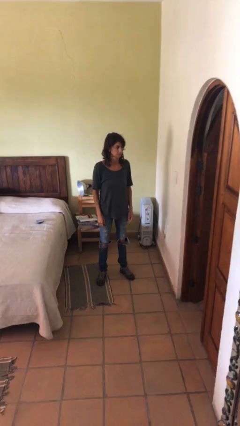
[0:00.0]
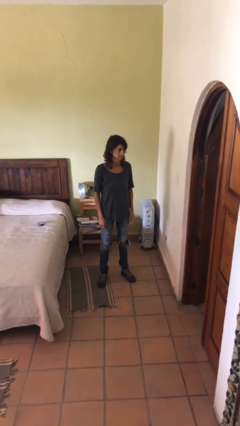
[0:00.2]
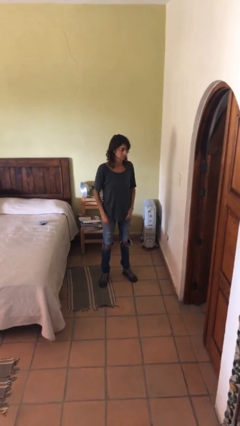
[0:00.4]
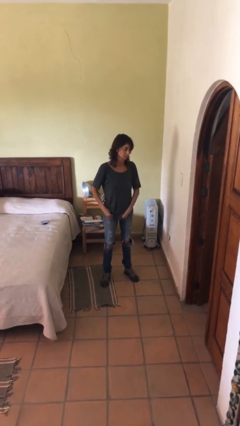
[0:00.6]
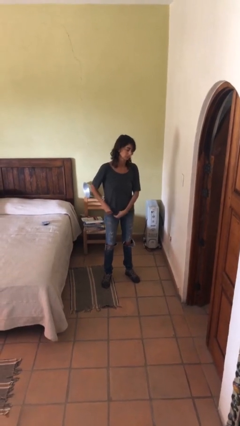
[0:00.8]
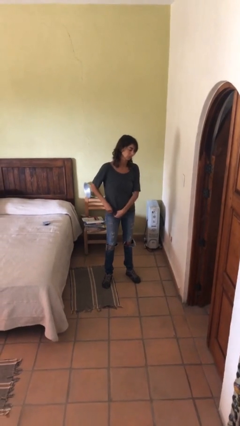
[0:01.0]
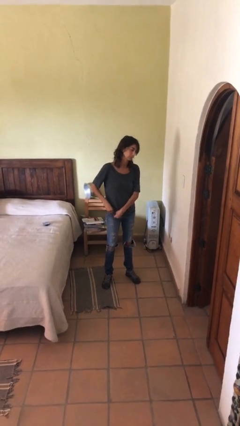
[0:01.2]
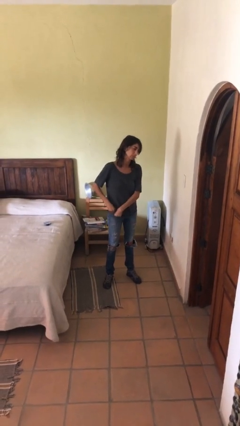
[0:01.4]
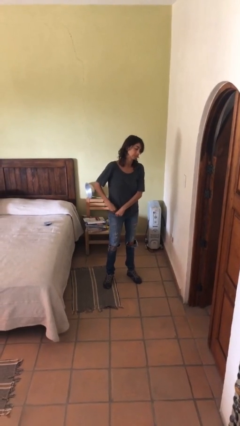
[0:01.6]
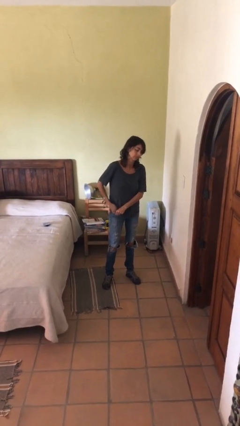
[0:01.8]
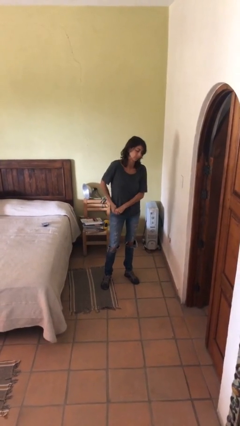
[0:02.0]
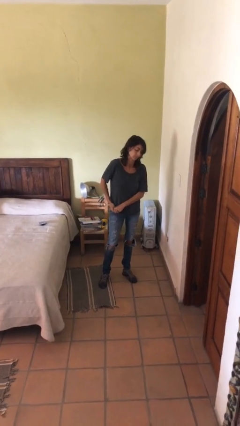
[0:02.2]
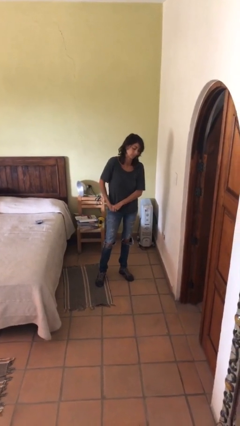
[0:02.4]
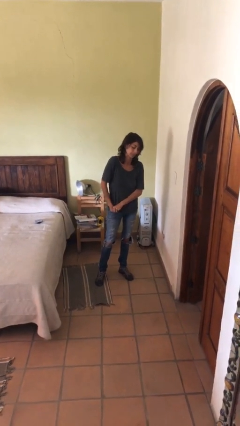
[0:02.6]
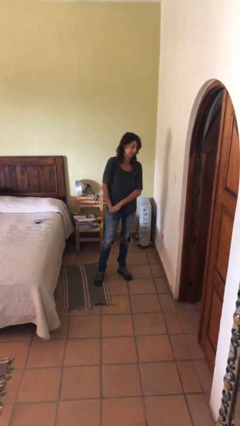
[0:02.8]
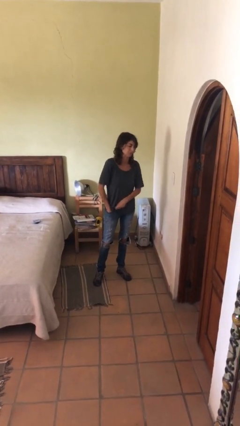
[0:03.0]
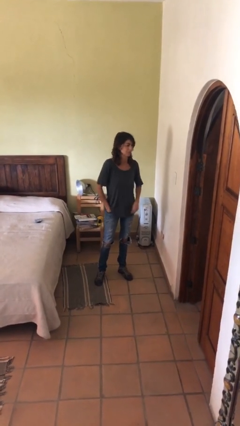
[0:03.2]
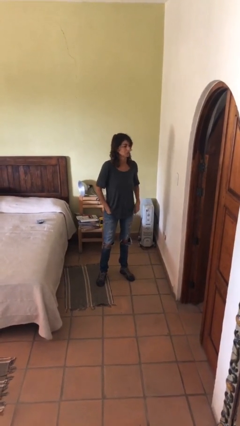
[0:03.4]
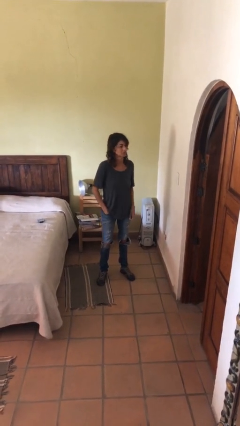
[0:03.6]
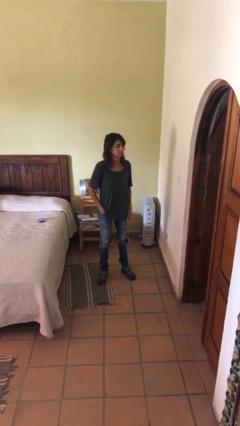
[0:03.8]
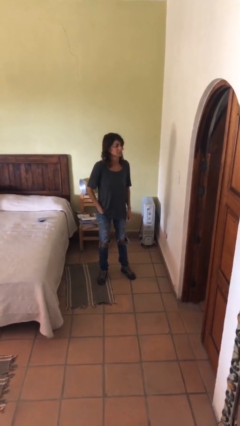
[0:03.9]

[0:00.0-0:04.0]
person puts hands in back pockets

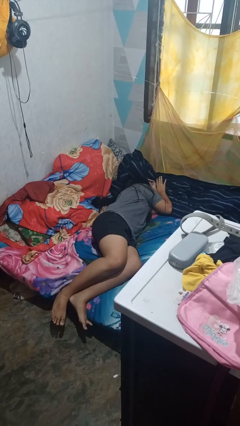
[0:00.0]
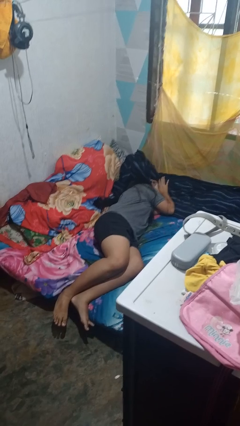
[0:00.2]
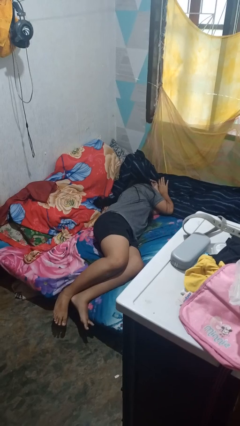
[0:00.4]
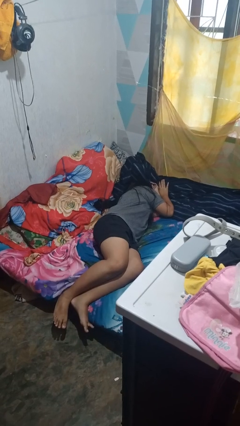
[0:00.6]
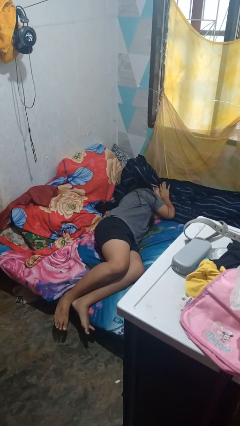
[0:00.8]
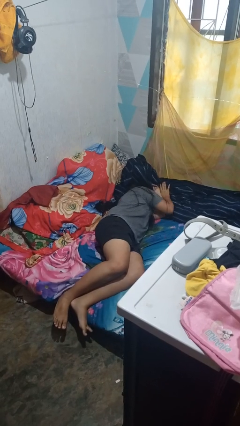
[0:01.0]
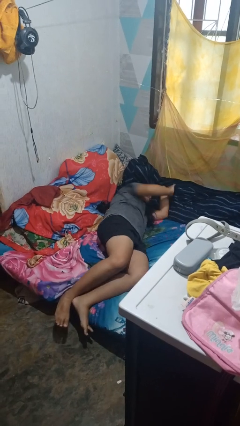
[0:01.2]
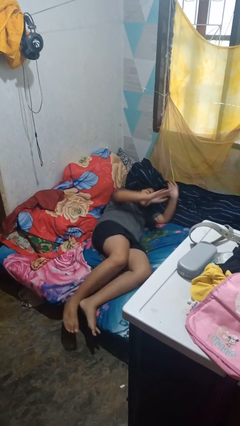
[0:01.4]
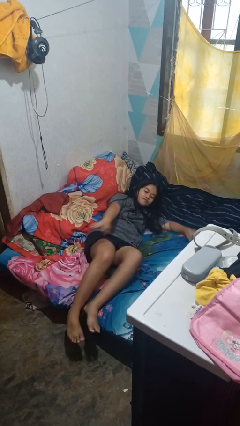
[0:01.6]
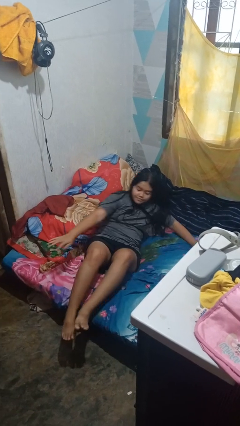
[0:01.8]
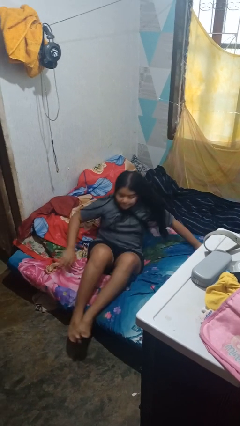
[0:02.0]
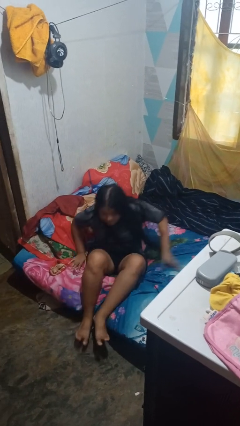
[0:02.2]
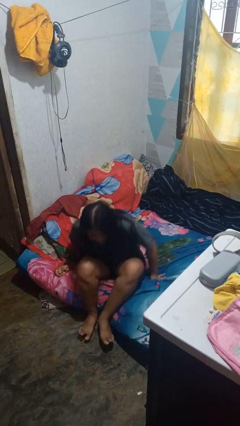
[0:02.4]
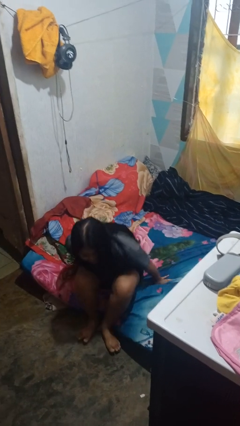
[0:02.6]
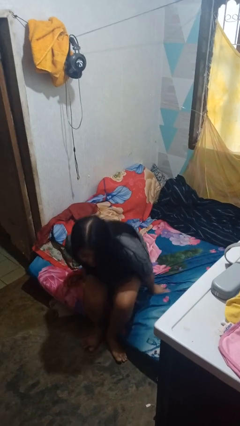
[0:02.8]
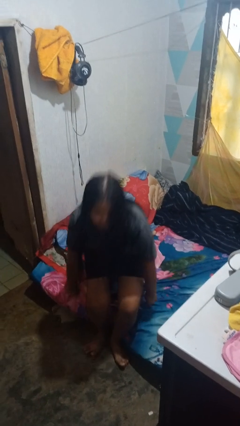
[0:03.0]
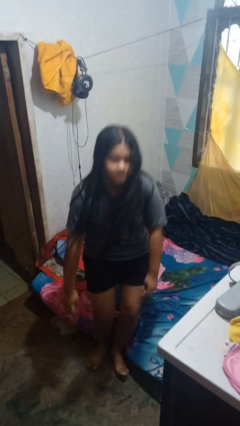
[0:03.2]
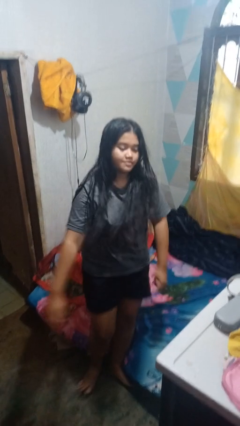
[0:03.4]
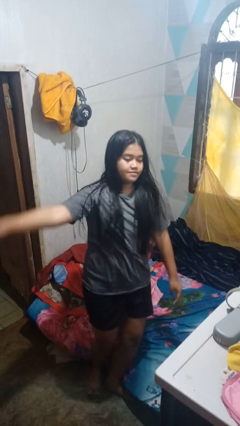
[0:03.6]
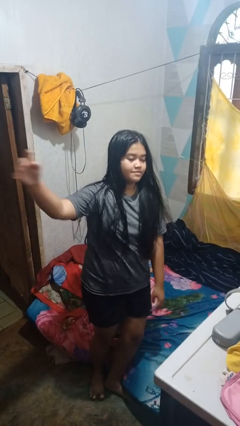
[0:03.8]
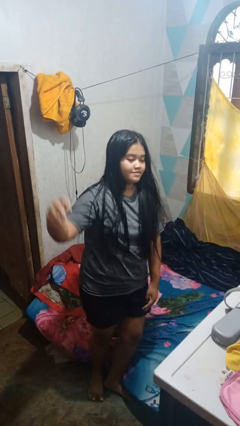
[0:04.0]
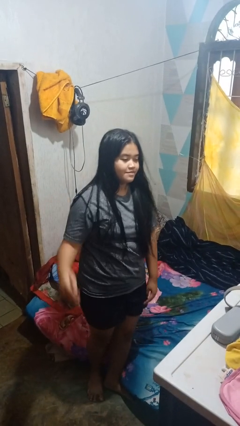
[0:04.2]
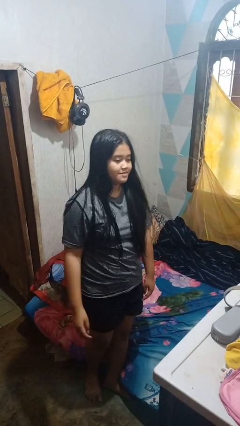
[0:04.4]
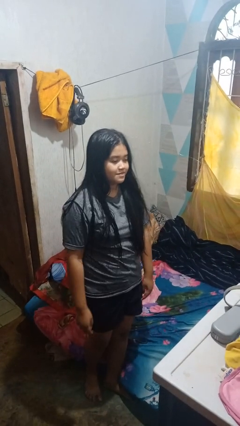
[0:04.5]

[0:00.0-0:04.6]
person stands up

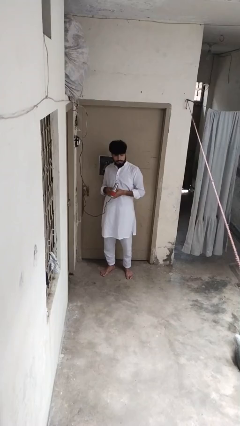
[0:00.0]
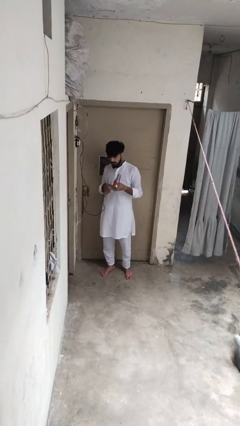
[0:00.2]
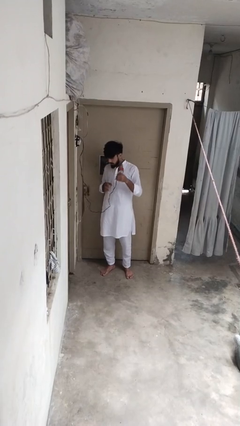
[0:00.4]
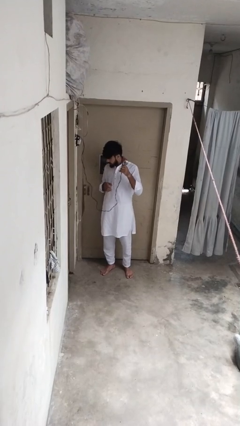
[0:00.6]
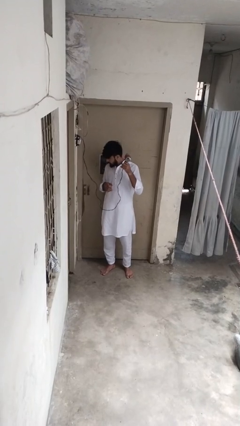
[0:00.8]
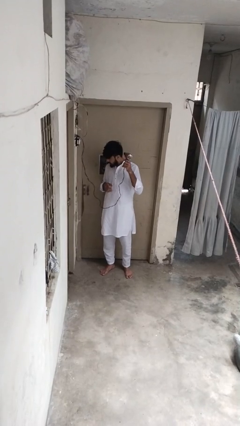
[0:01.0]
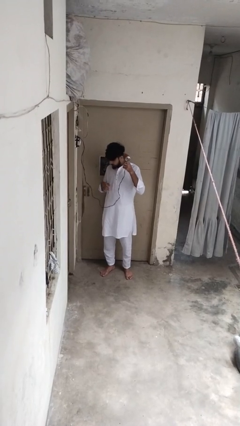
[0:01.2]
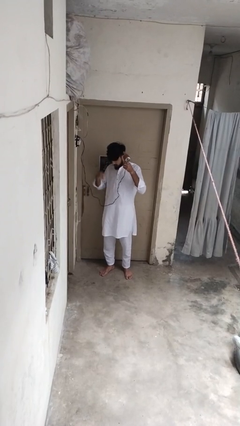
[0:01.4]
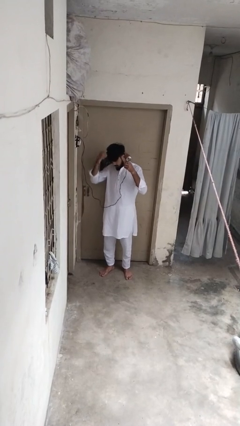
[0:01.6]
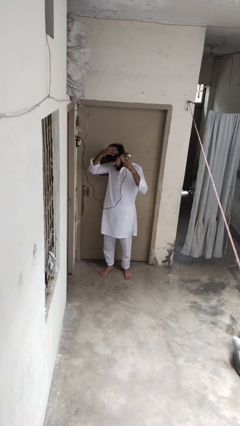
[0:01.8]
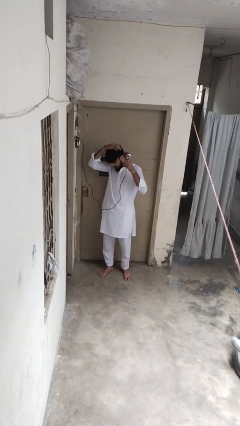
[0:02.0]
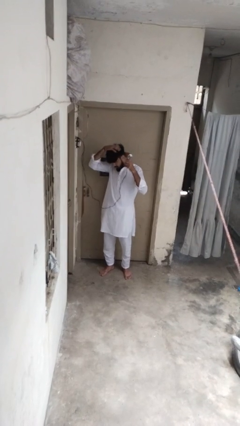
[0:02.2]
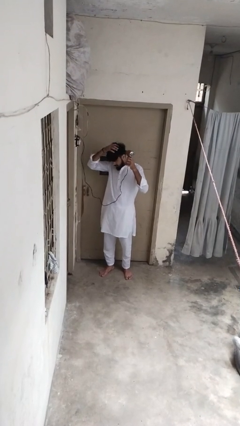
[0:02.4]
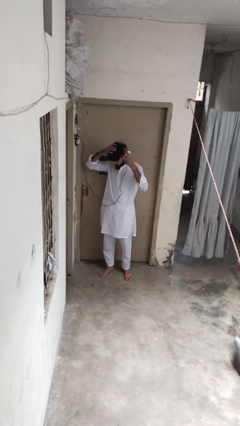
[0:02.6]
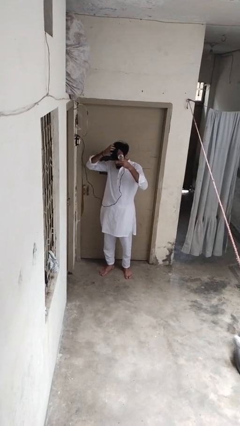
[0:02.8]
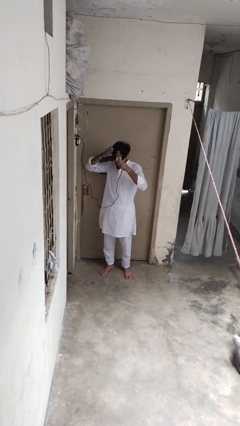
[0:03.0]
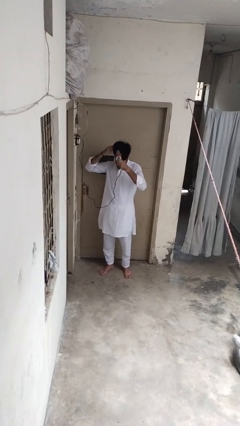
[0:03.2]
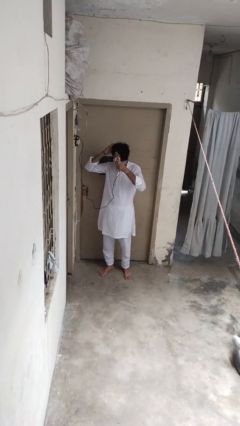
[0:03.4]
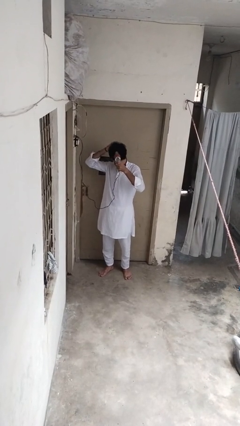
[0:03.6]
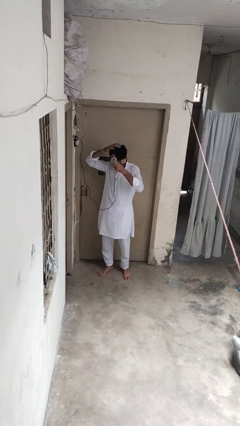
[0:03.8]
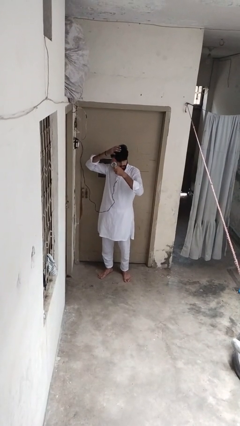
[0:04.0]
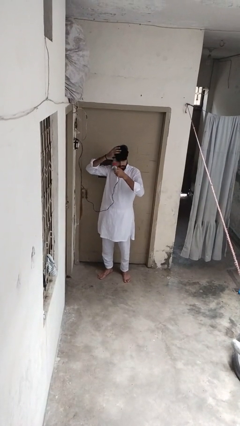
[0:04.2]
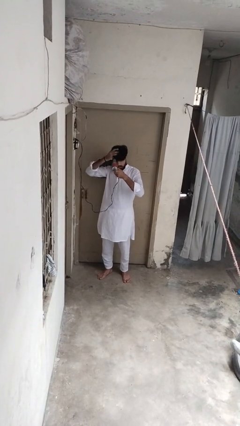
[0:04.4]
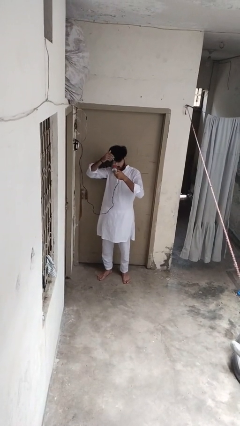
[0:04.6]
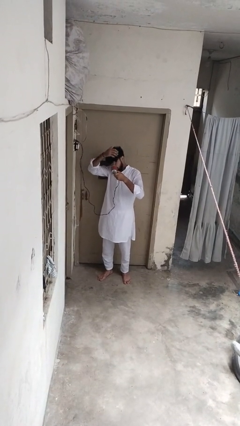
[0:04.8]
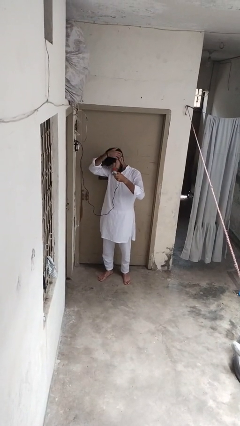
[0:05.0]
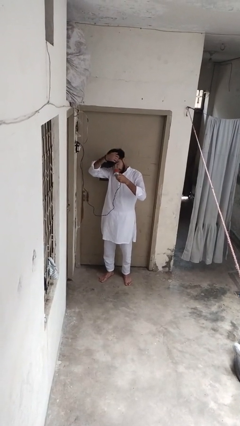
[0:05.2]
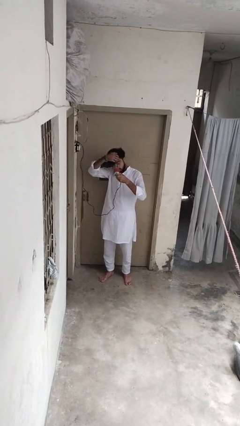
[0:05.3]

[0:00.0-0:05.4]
person dries hair with hairdryer

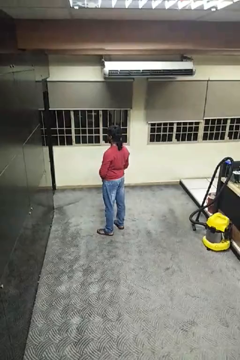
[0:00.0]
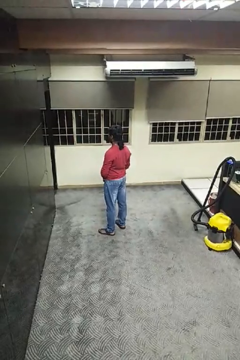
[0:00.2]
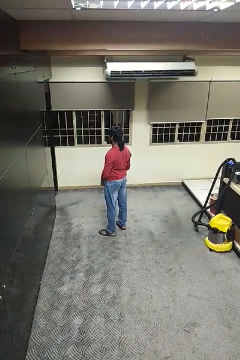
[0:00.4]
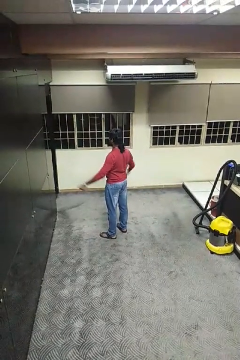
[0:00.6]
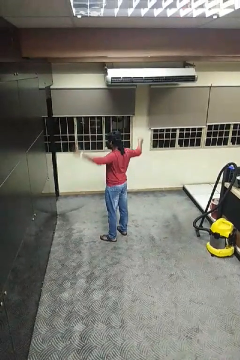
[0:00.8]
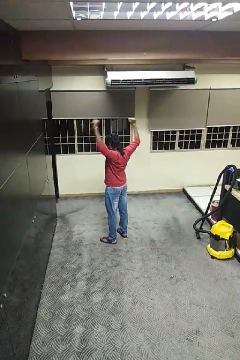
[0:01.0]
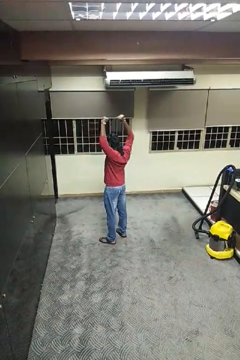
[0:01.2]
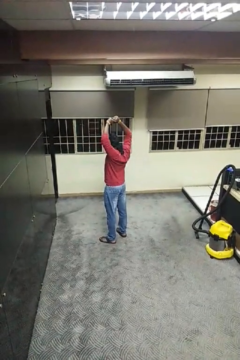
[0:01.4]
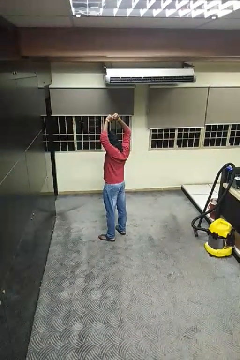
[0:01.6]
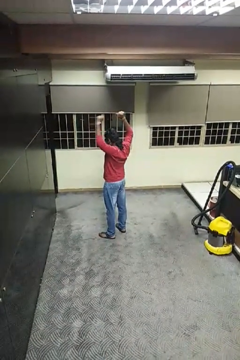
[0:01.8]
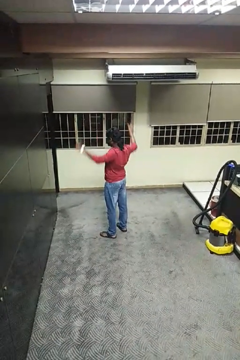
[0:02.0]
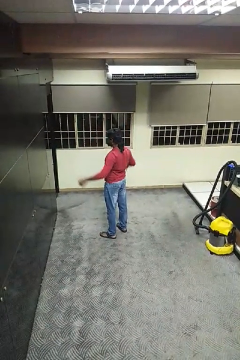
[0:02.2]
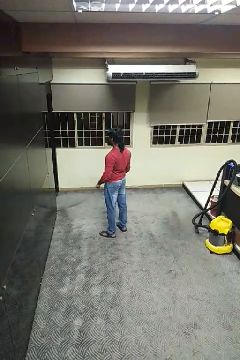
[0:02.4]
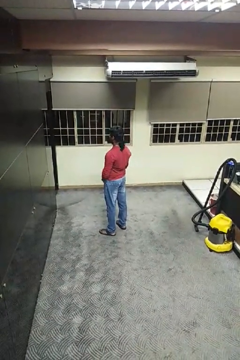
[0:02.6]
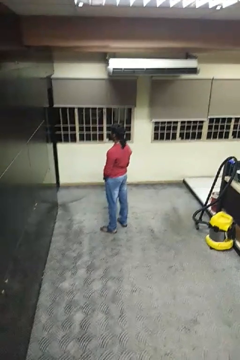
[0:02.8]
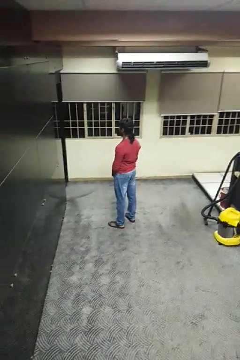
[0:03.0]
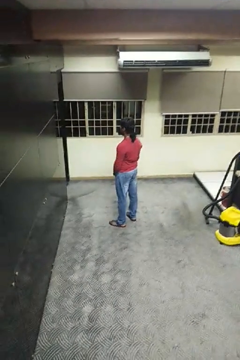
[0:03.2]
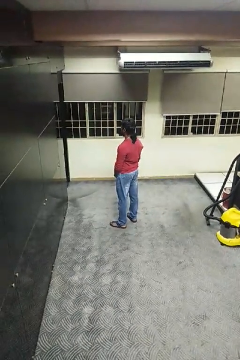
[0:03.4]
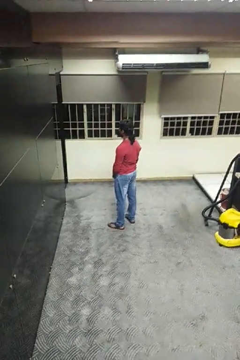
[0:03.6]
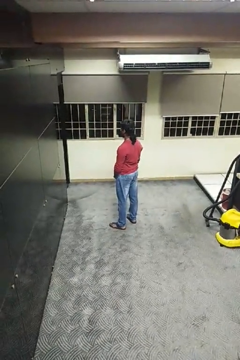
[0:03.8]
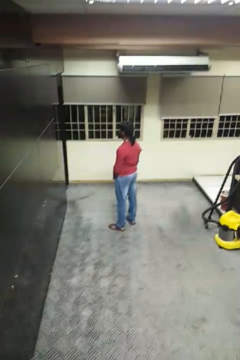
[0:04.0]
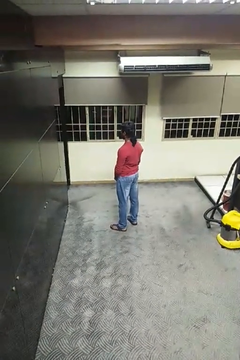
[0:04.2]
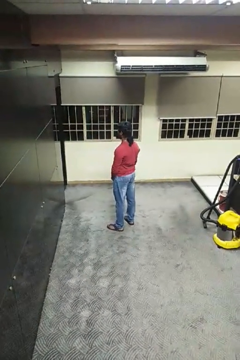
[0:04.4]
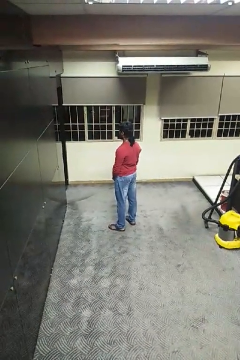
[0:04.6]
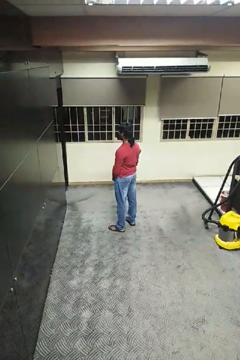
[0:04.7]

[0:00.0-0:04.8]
person stretches arms over head
